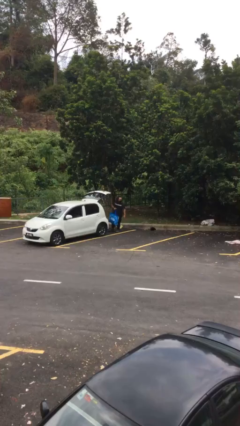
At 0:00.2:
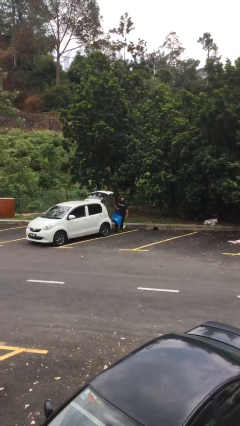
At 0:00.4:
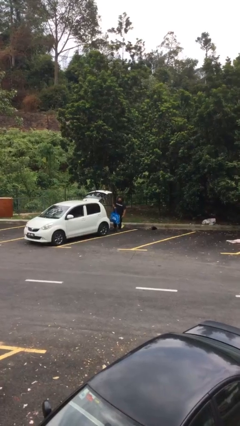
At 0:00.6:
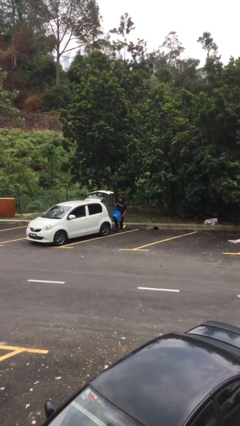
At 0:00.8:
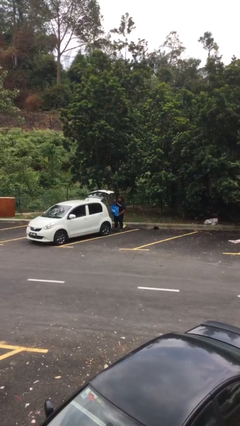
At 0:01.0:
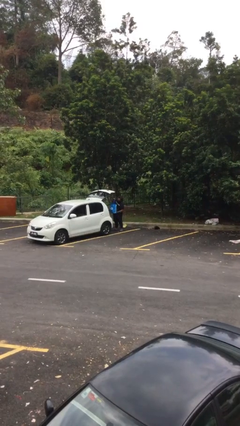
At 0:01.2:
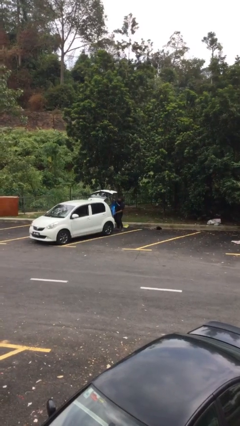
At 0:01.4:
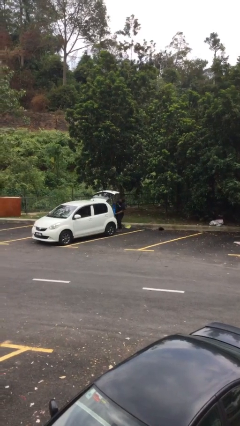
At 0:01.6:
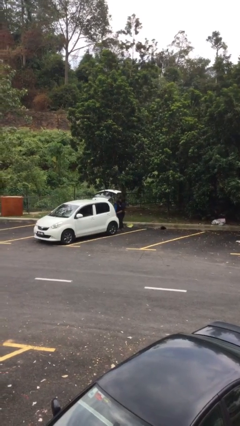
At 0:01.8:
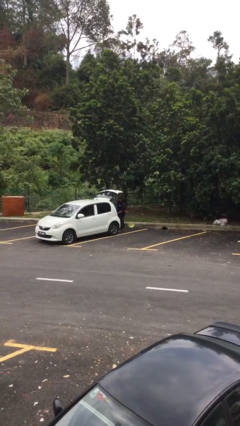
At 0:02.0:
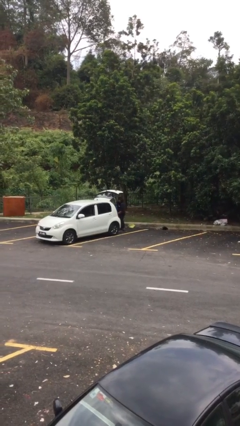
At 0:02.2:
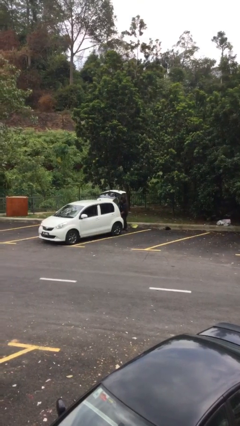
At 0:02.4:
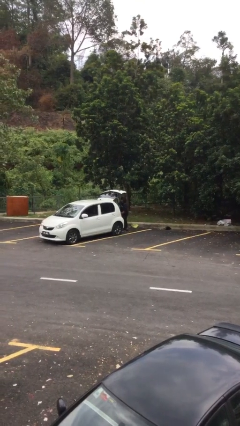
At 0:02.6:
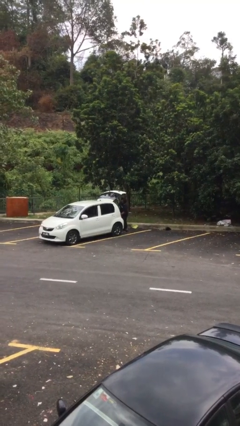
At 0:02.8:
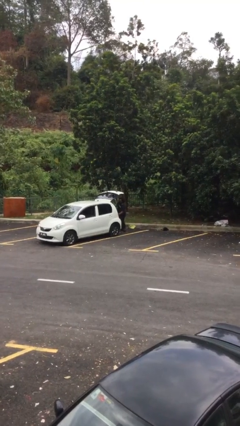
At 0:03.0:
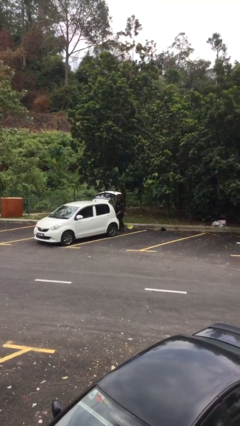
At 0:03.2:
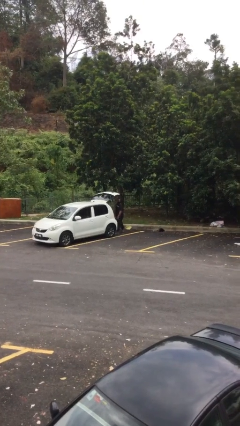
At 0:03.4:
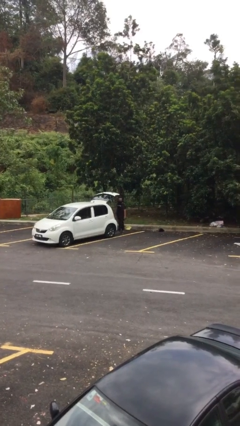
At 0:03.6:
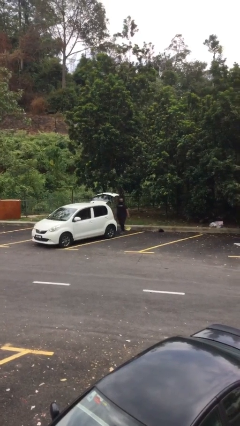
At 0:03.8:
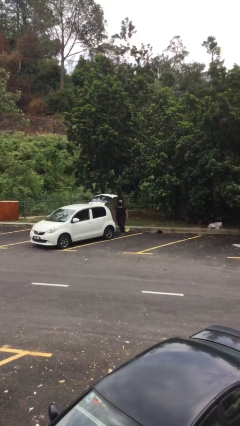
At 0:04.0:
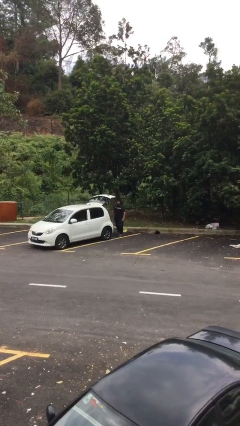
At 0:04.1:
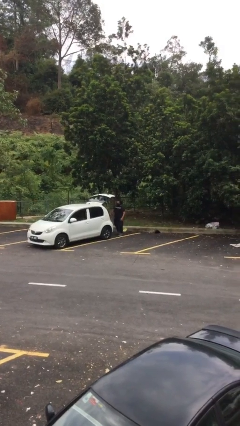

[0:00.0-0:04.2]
person loads car

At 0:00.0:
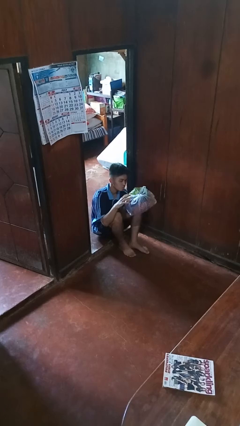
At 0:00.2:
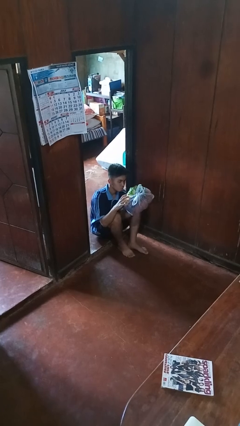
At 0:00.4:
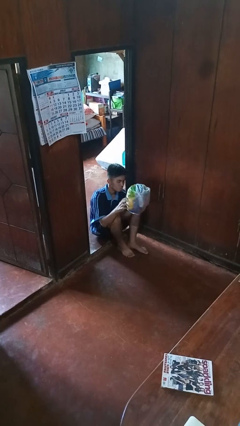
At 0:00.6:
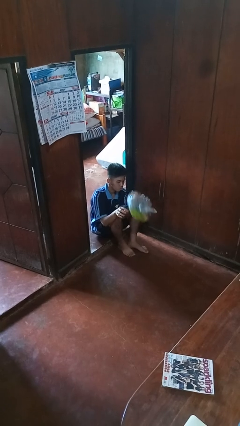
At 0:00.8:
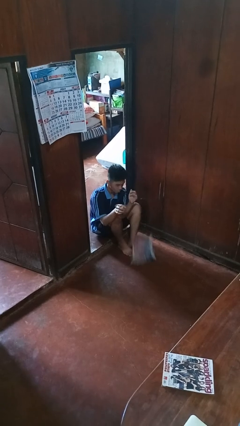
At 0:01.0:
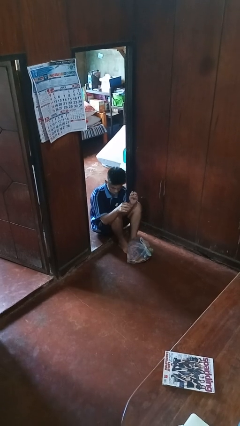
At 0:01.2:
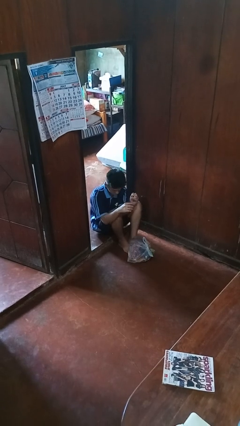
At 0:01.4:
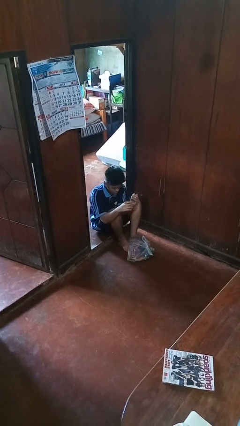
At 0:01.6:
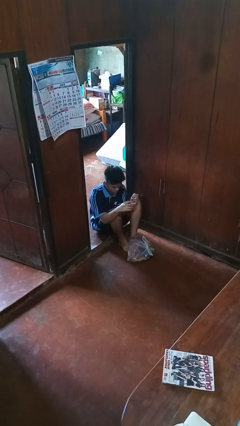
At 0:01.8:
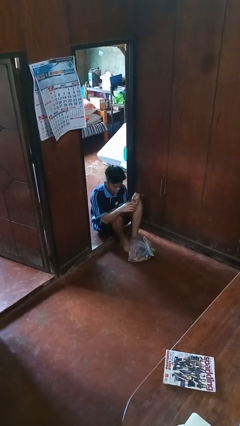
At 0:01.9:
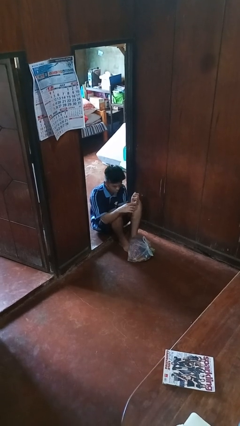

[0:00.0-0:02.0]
person drops object

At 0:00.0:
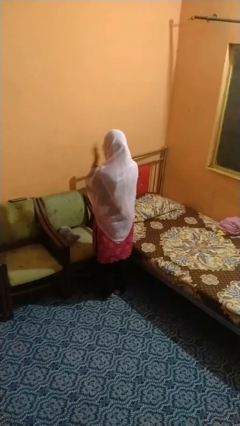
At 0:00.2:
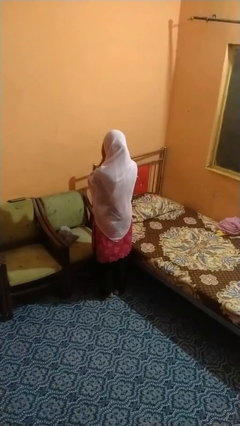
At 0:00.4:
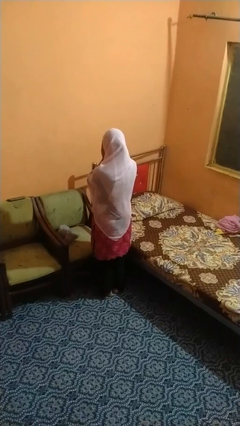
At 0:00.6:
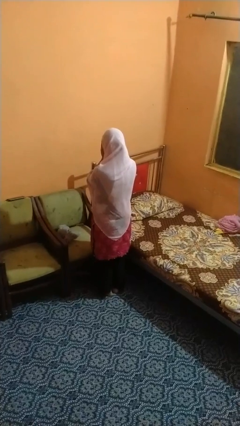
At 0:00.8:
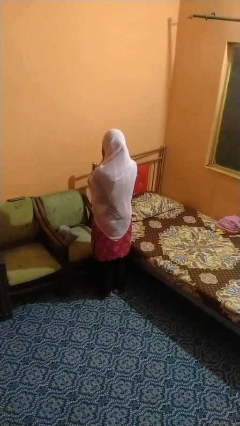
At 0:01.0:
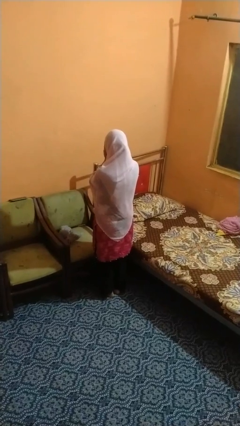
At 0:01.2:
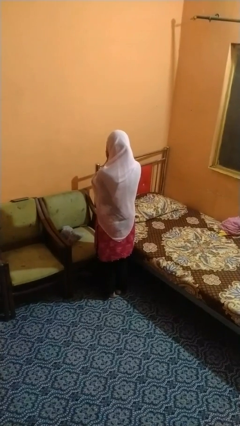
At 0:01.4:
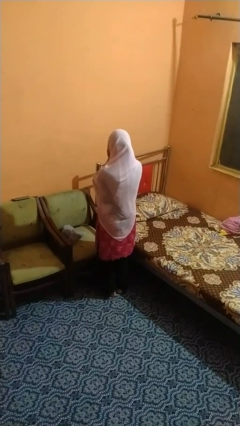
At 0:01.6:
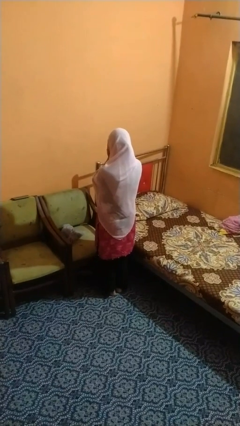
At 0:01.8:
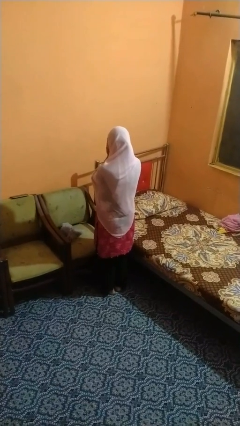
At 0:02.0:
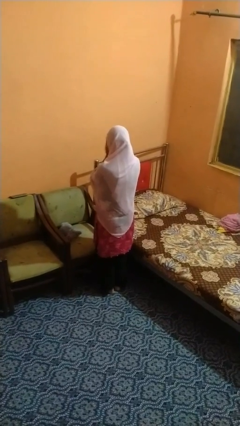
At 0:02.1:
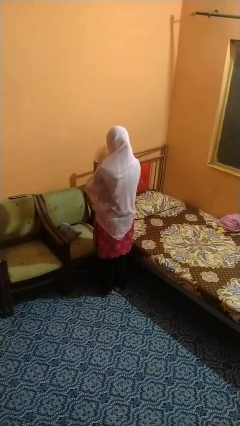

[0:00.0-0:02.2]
person covers face with hands

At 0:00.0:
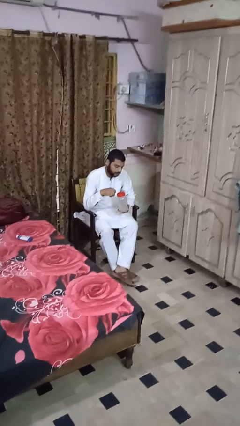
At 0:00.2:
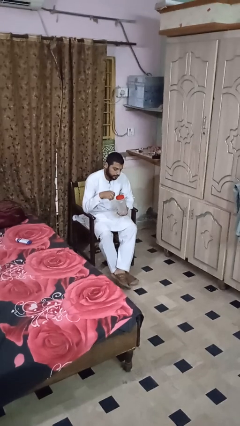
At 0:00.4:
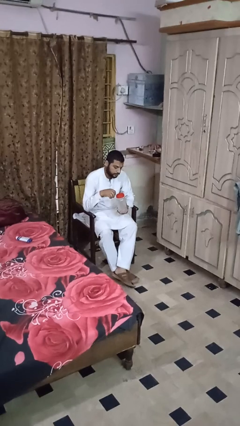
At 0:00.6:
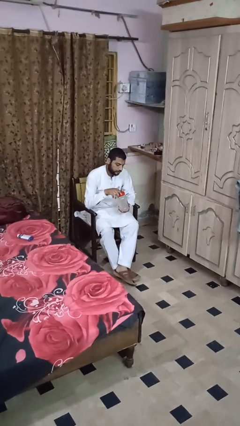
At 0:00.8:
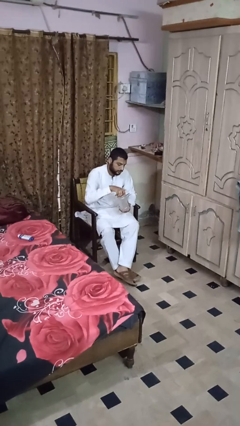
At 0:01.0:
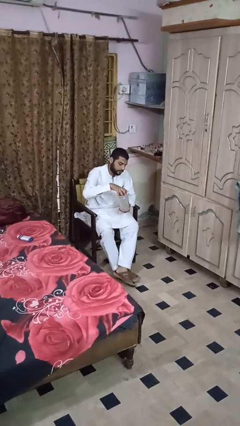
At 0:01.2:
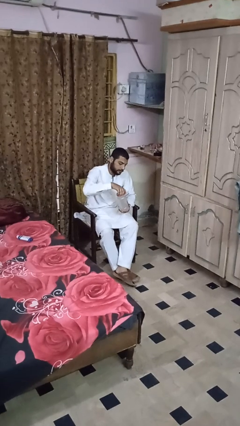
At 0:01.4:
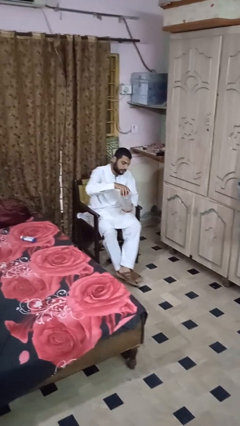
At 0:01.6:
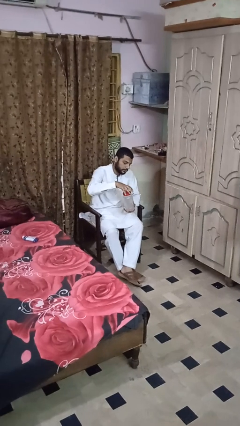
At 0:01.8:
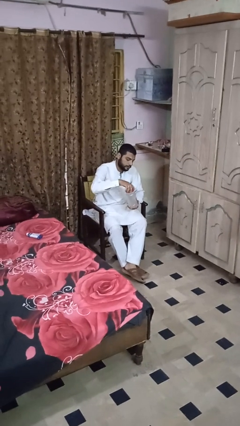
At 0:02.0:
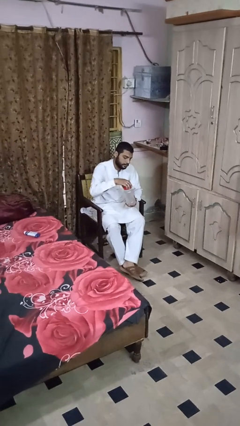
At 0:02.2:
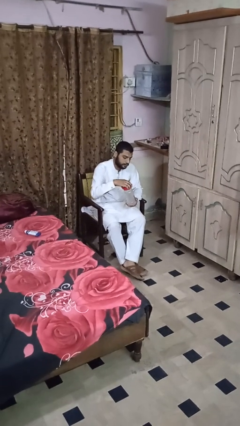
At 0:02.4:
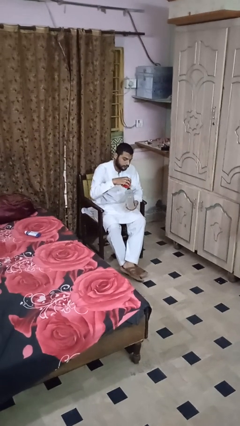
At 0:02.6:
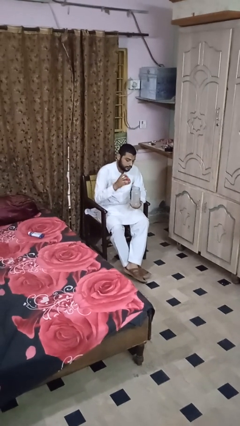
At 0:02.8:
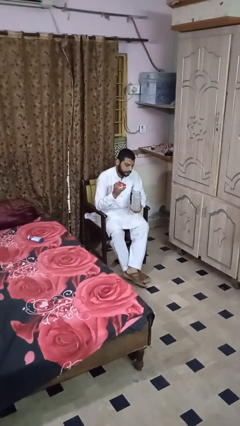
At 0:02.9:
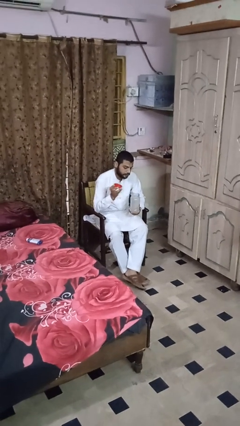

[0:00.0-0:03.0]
person opens jar

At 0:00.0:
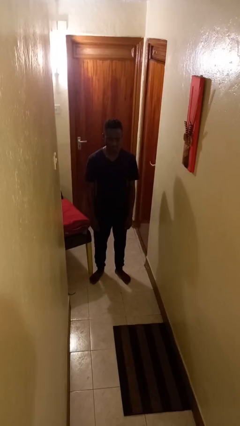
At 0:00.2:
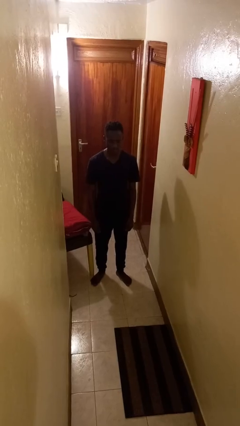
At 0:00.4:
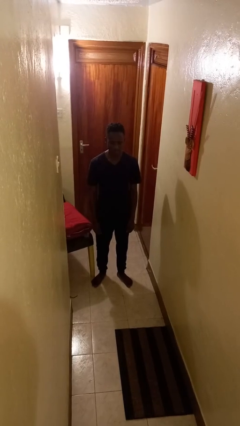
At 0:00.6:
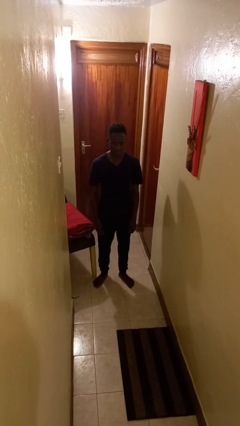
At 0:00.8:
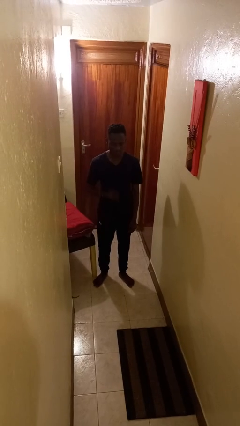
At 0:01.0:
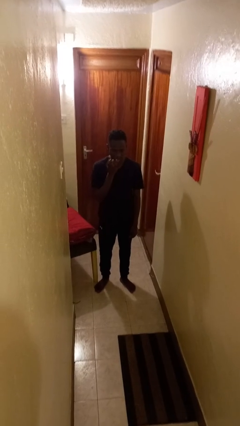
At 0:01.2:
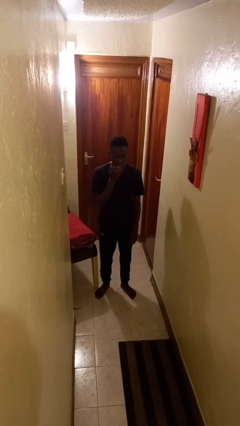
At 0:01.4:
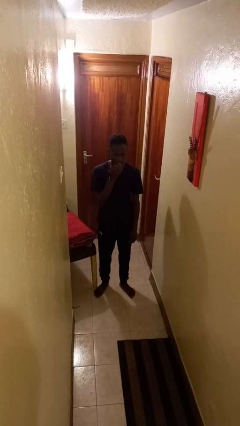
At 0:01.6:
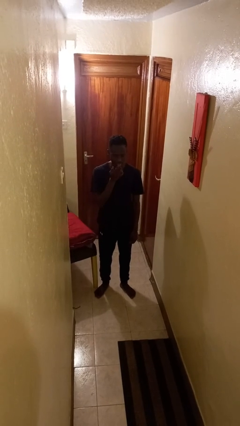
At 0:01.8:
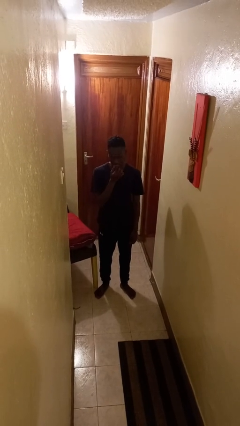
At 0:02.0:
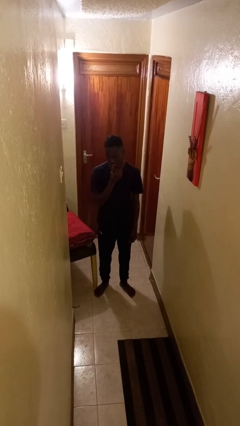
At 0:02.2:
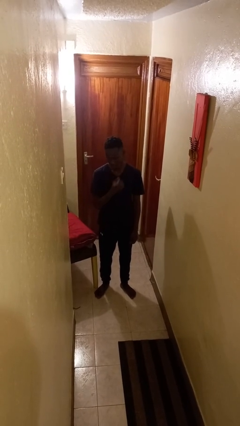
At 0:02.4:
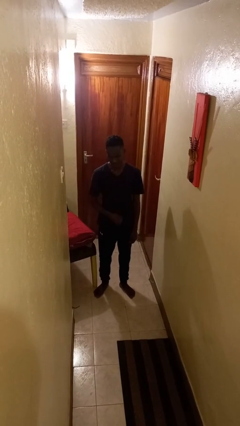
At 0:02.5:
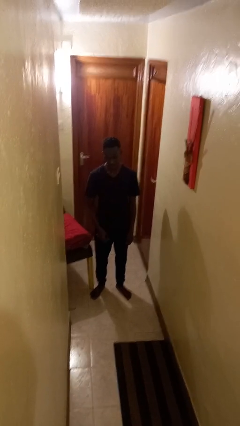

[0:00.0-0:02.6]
person licks fingers

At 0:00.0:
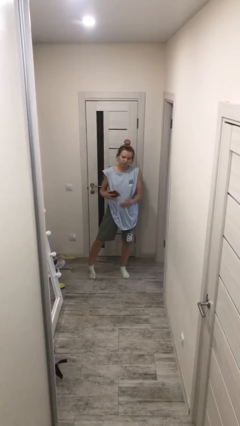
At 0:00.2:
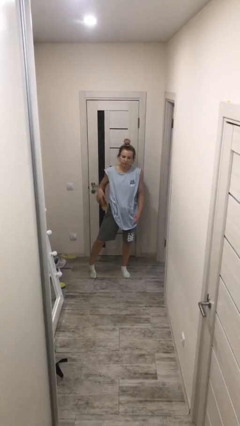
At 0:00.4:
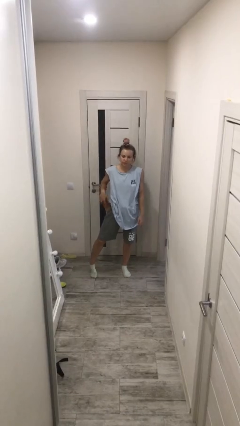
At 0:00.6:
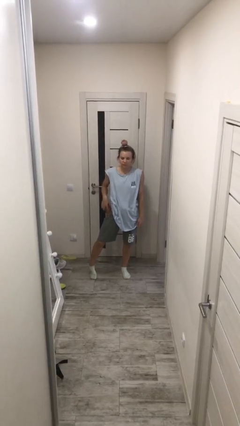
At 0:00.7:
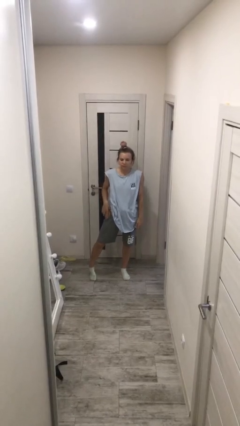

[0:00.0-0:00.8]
person puts phone into pocket

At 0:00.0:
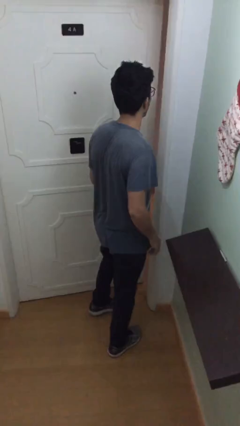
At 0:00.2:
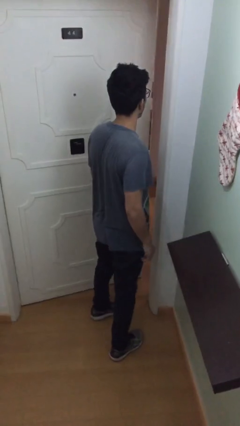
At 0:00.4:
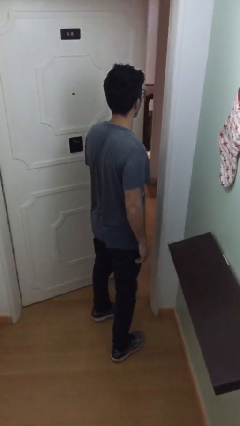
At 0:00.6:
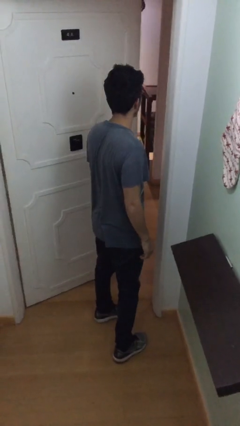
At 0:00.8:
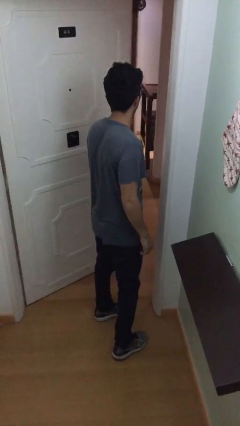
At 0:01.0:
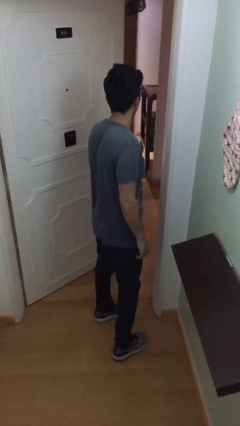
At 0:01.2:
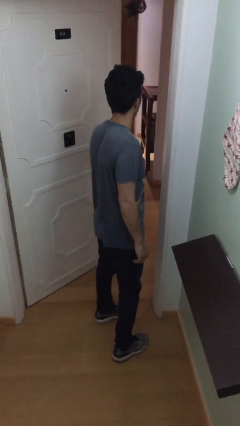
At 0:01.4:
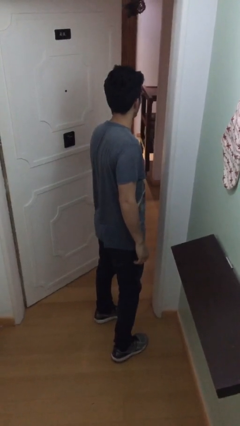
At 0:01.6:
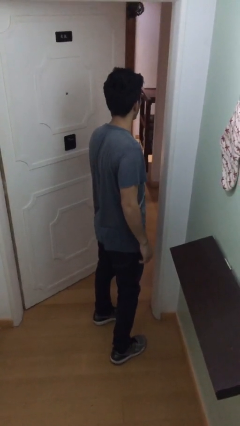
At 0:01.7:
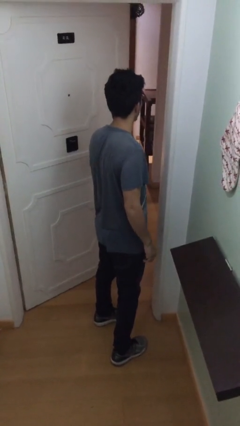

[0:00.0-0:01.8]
person opens facility door

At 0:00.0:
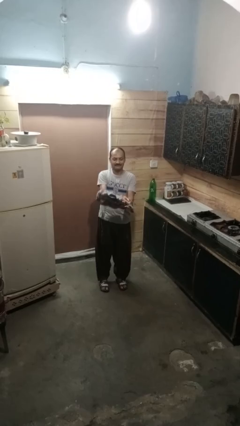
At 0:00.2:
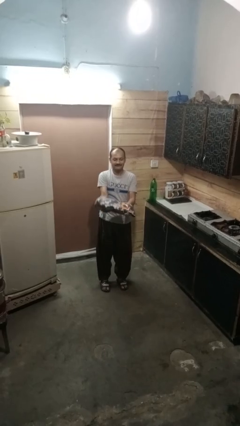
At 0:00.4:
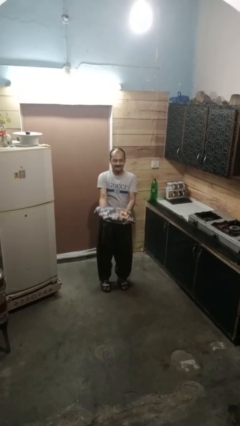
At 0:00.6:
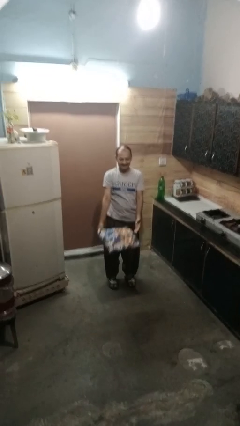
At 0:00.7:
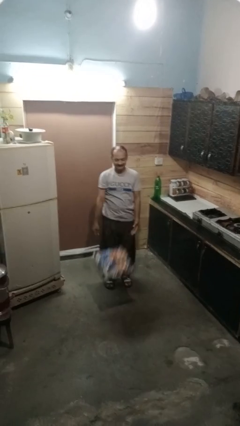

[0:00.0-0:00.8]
person catches dropped object
